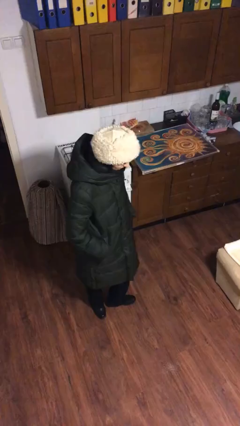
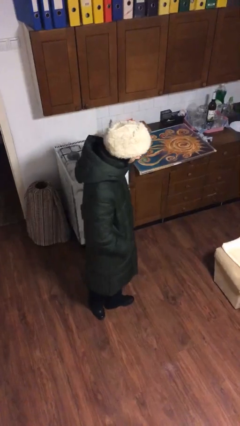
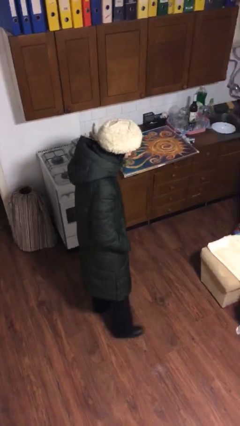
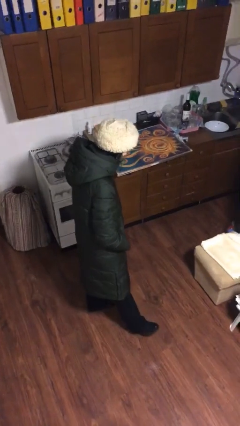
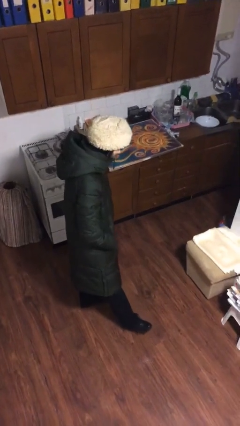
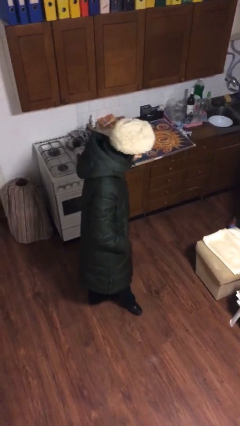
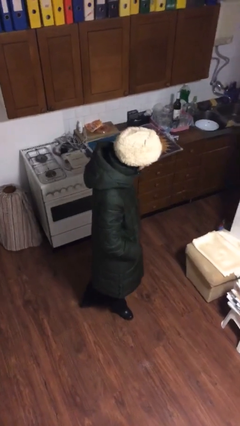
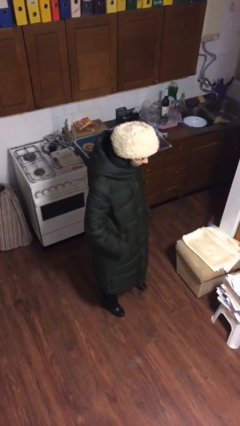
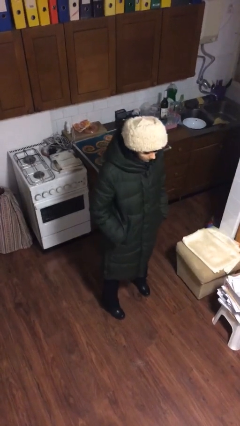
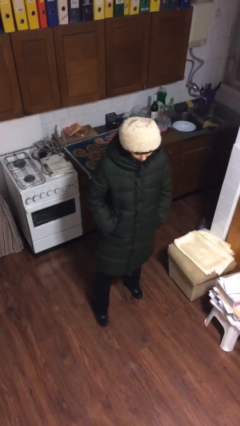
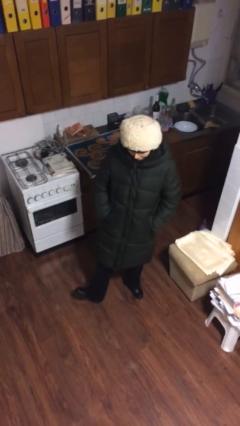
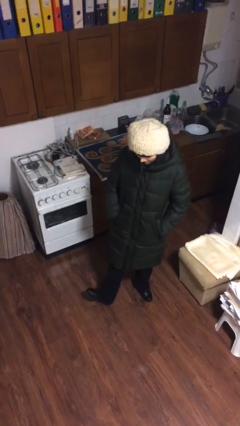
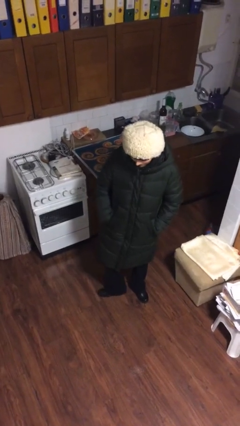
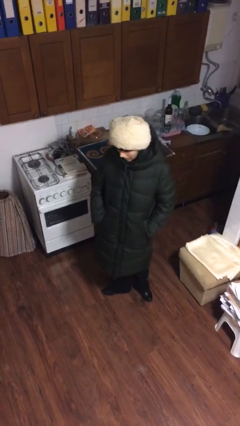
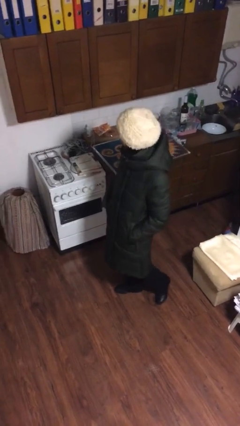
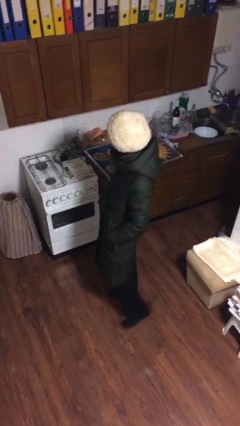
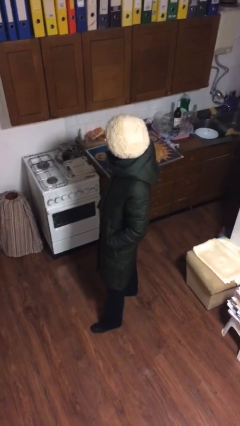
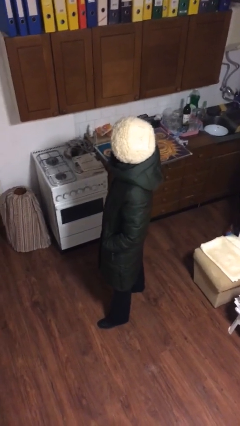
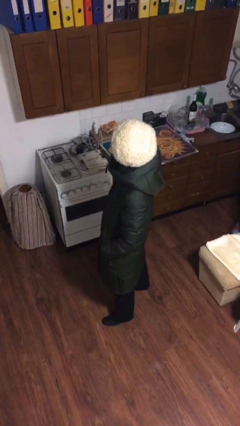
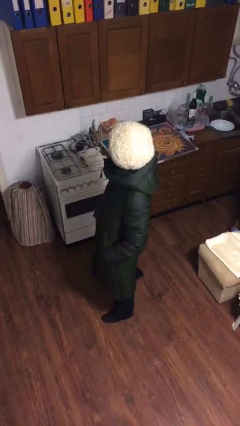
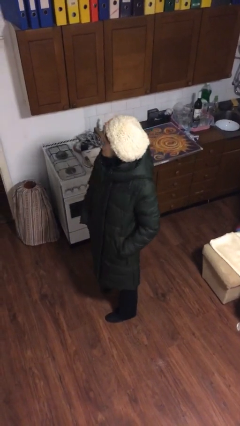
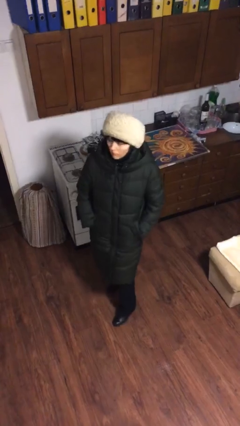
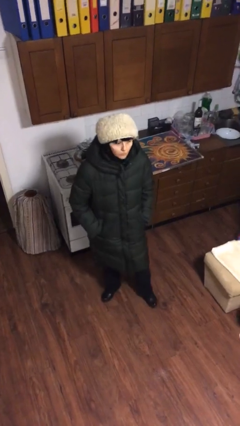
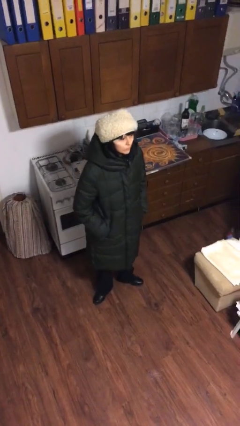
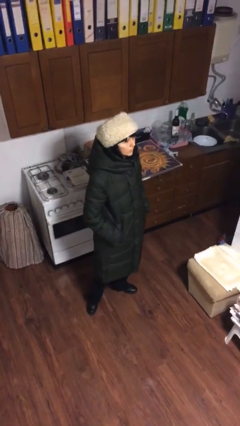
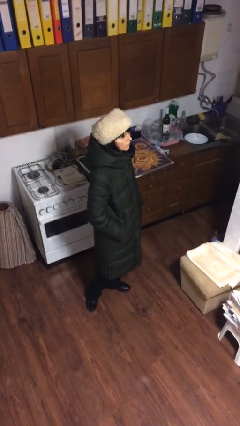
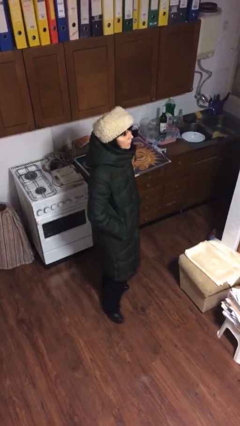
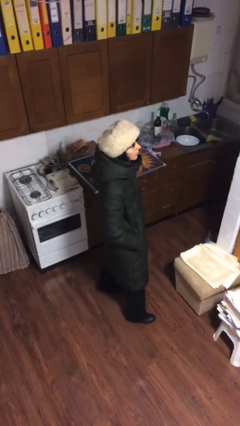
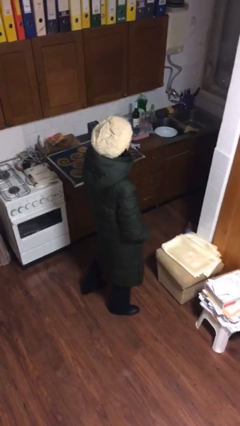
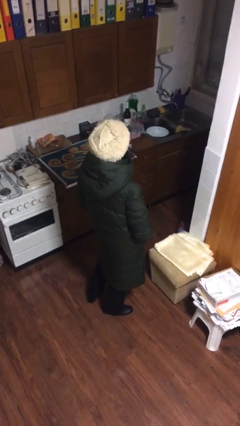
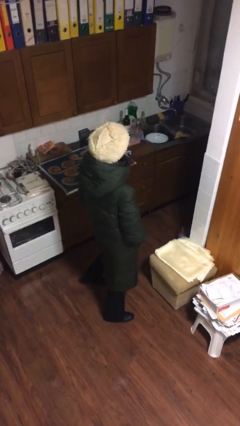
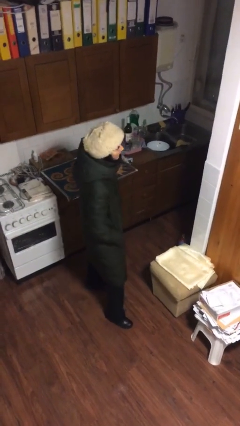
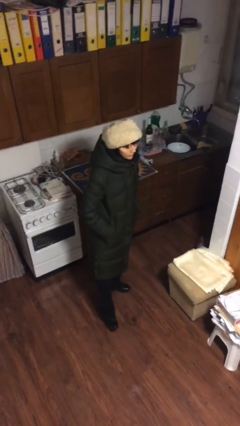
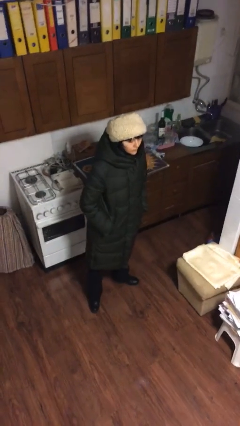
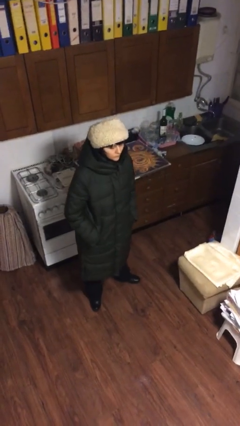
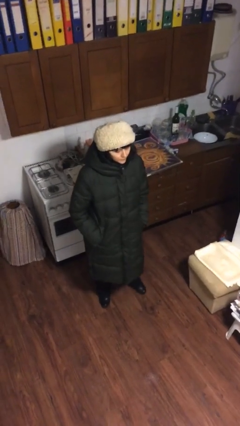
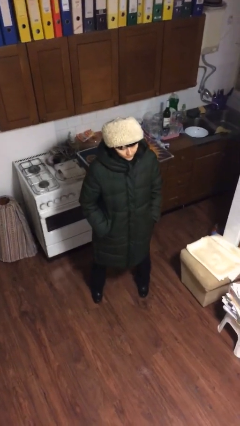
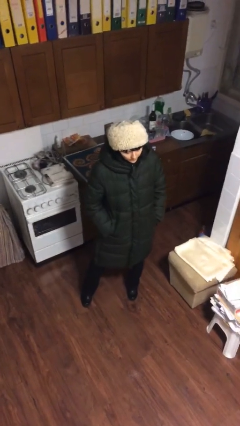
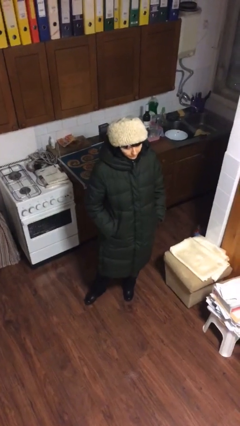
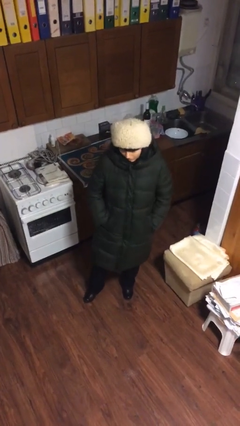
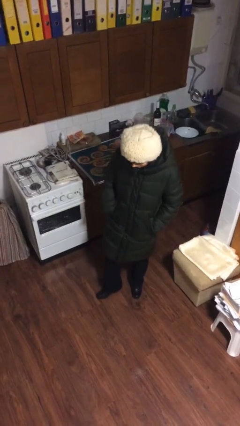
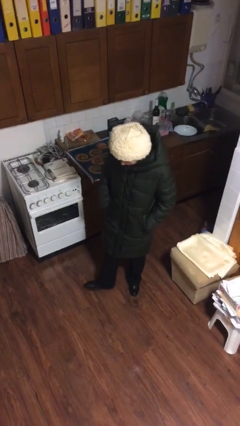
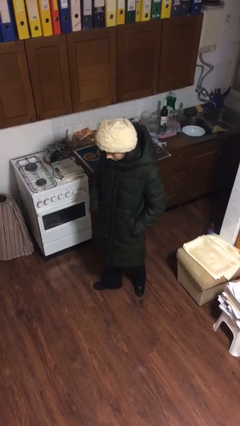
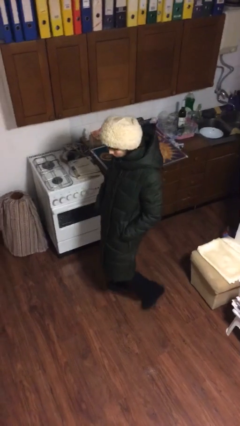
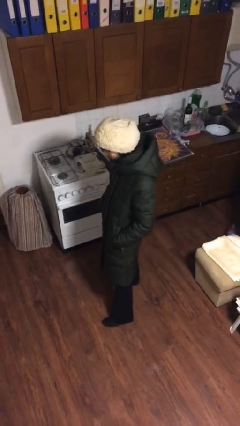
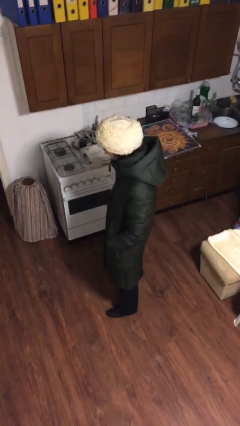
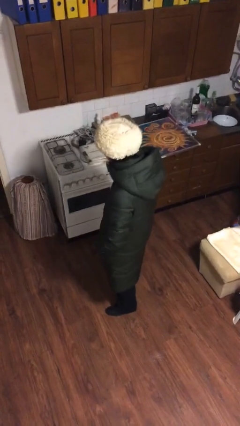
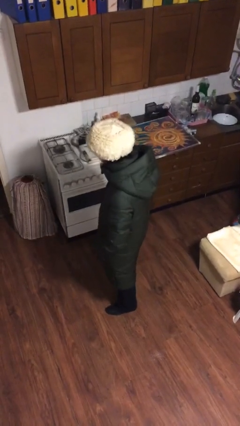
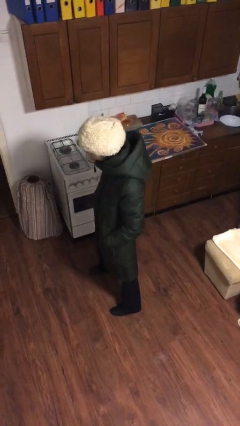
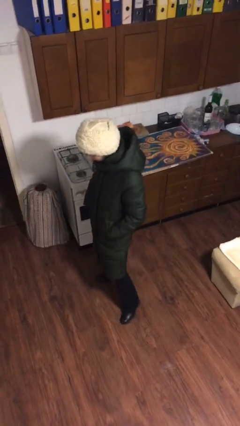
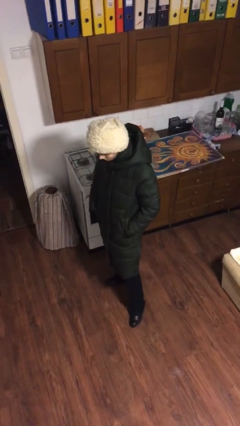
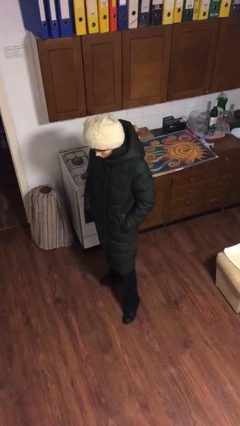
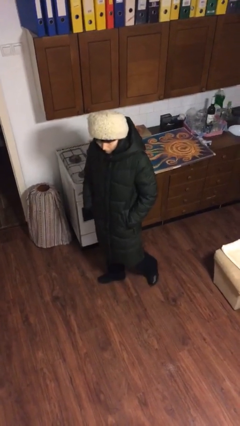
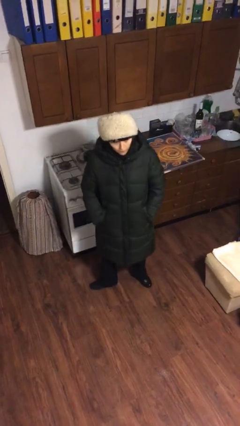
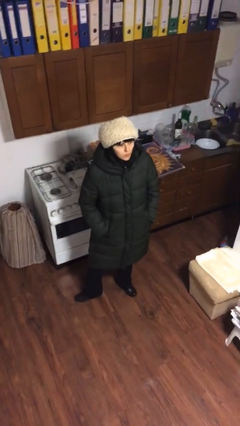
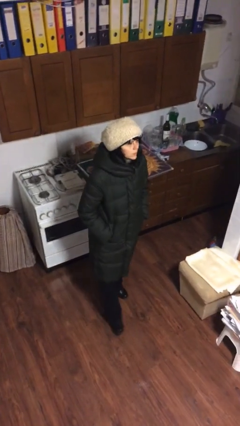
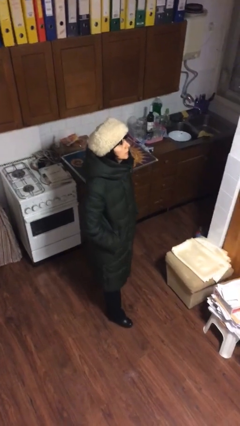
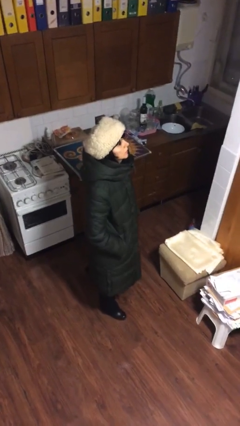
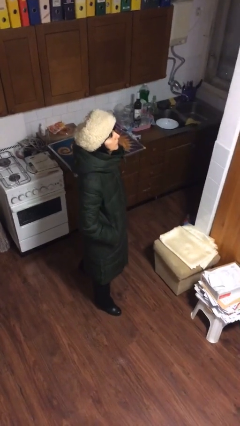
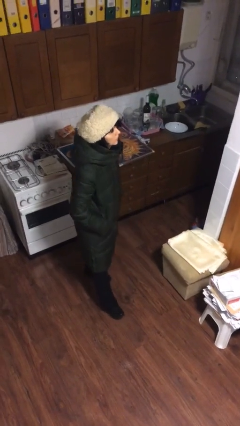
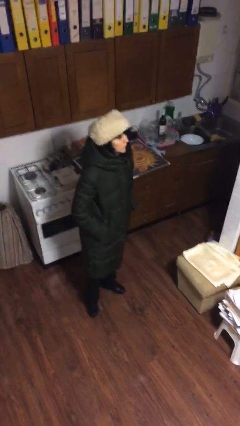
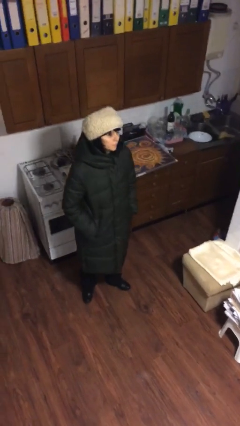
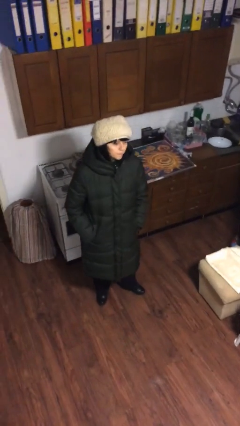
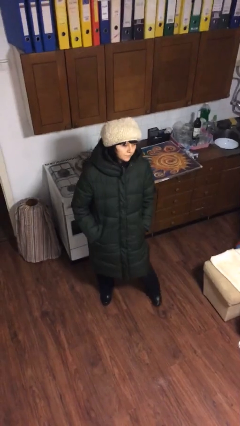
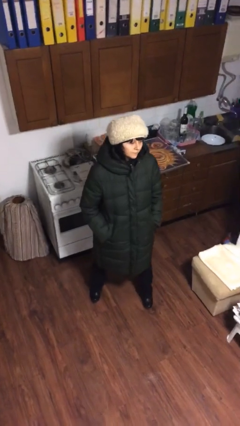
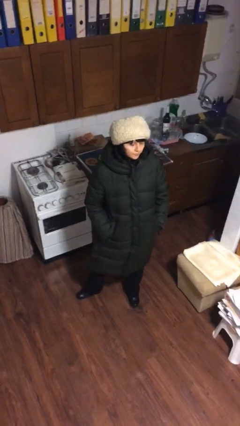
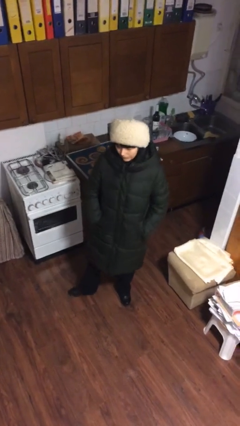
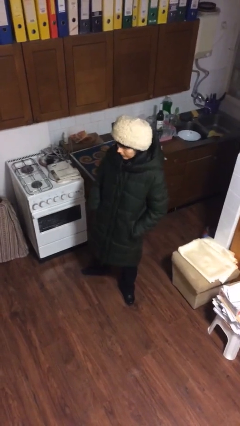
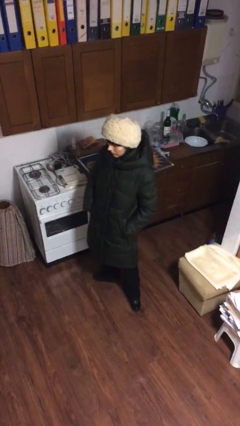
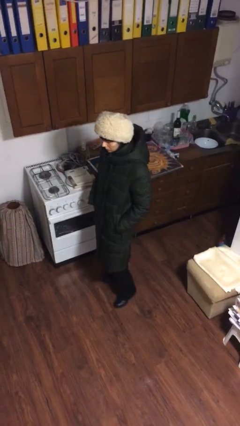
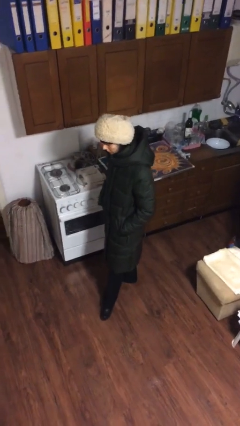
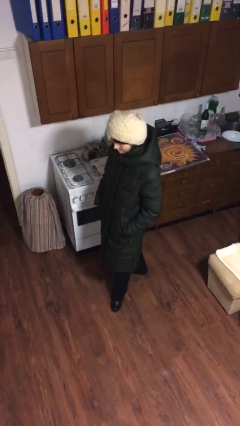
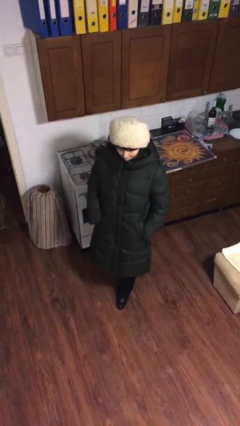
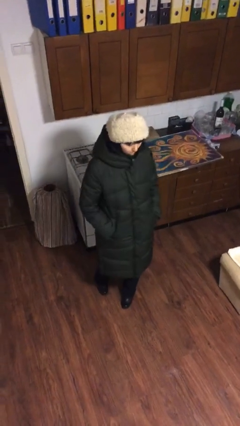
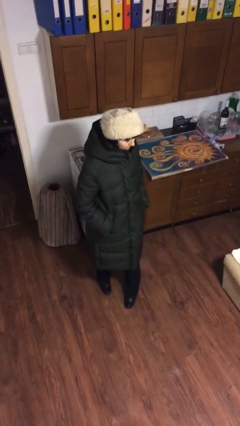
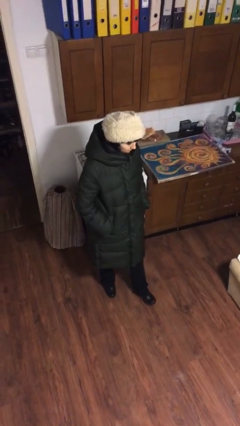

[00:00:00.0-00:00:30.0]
person walks

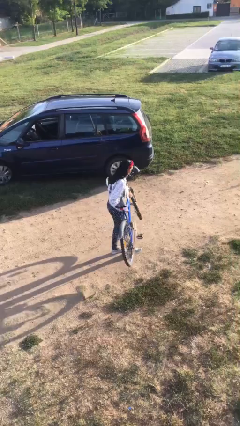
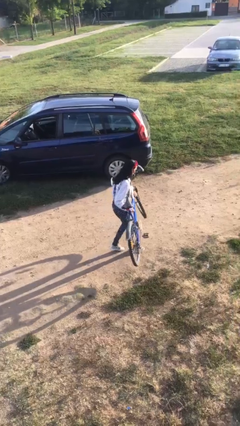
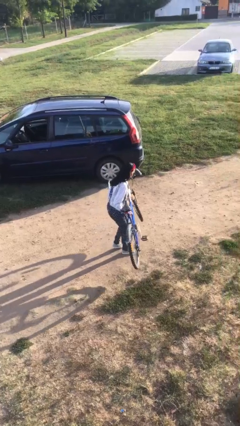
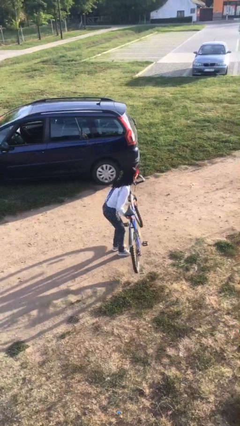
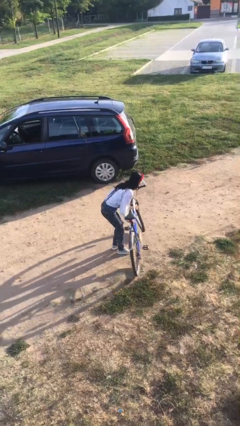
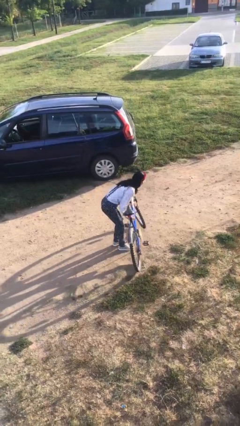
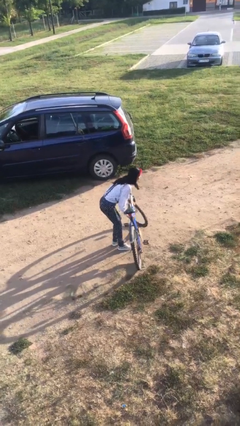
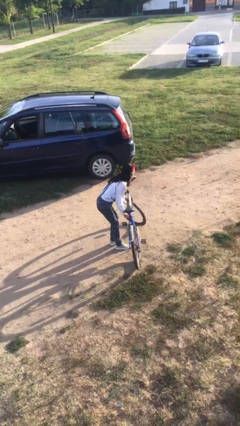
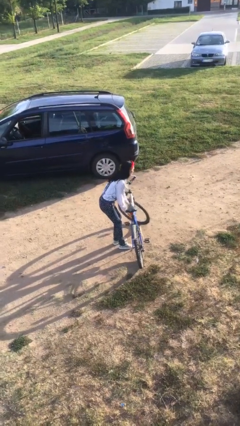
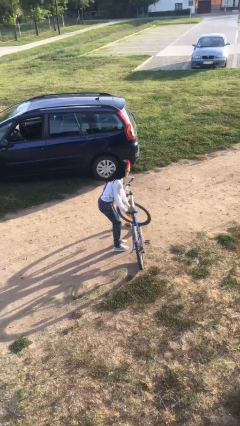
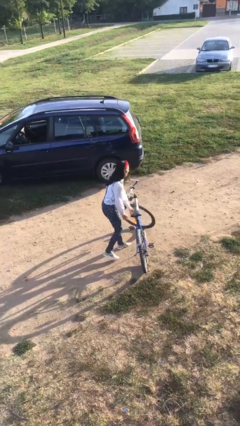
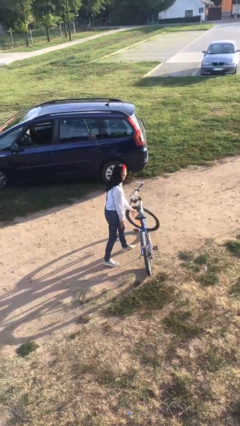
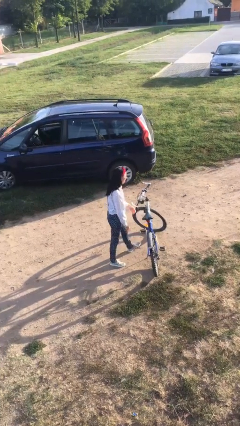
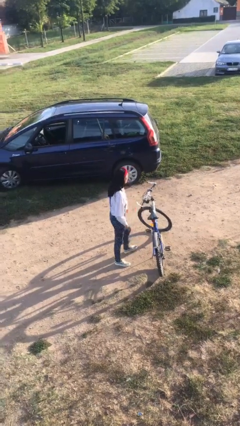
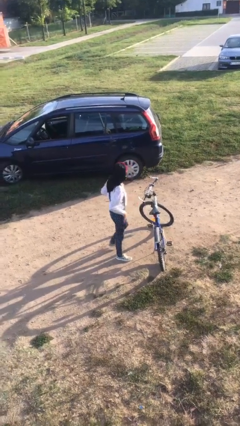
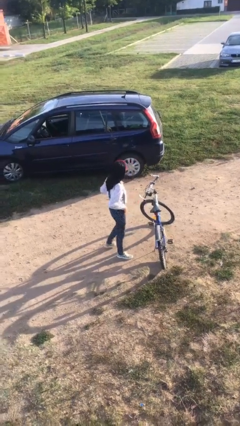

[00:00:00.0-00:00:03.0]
person puts down object on floor

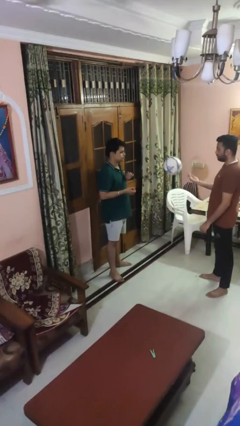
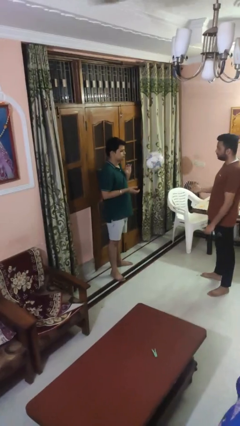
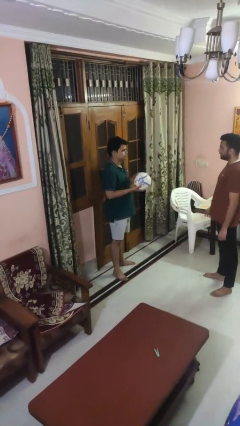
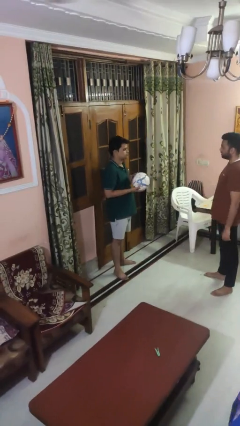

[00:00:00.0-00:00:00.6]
person catches object from person
